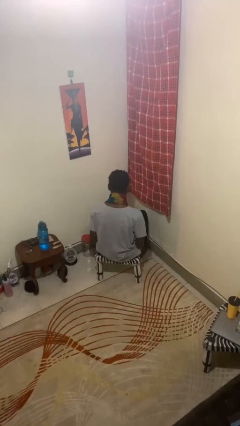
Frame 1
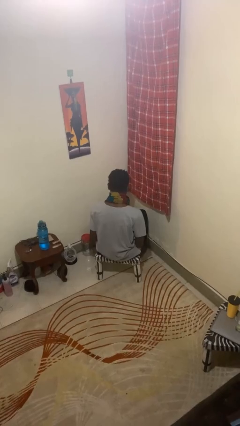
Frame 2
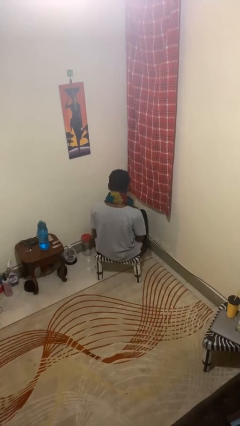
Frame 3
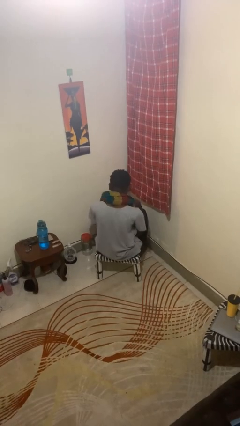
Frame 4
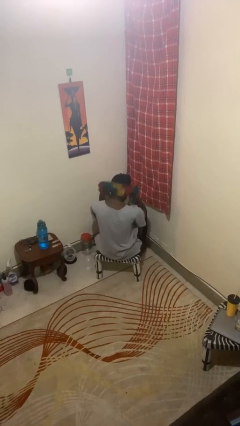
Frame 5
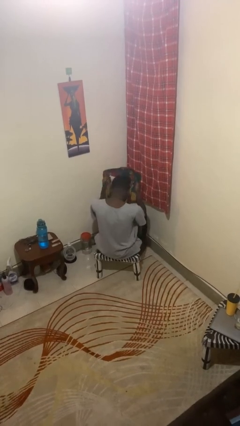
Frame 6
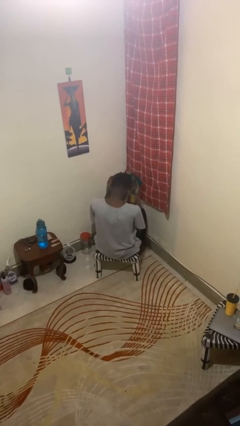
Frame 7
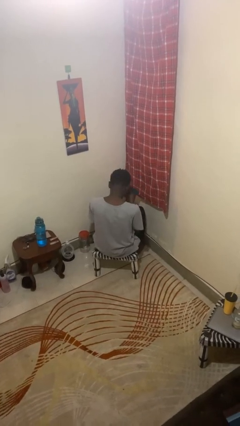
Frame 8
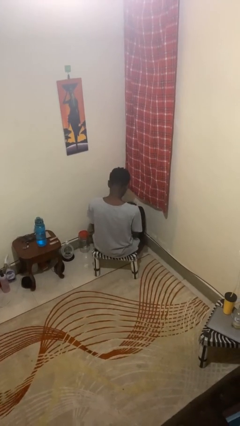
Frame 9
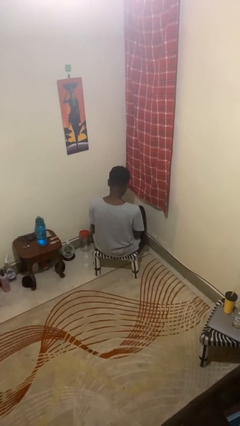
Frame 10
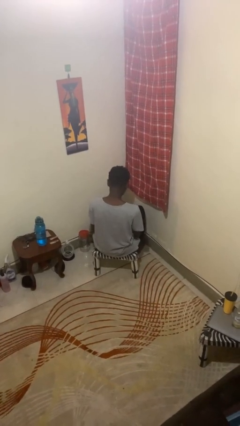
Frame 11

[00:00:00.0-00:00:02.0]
person takes off scarf

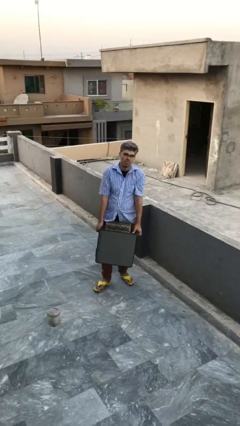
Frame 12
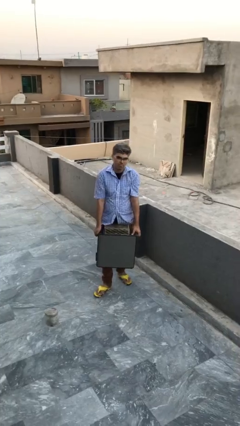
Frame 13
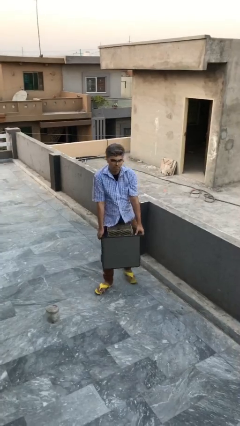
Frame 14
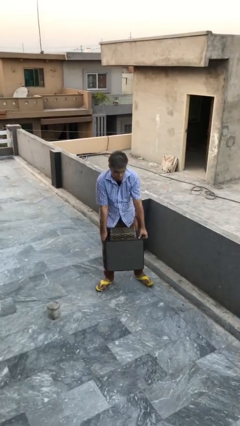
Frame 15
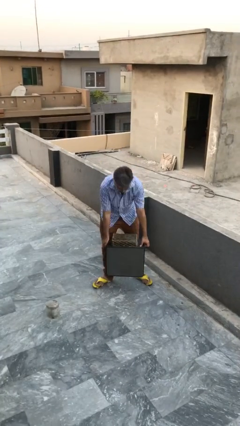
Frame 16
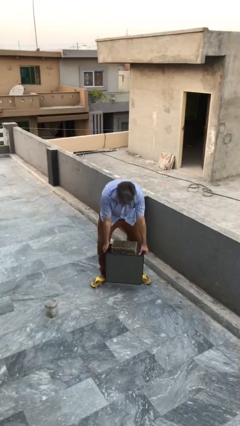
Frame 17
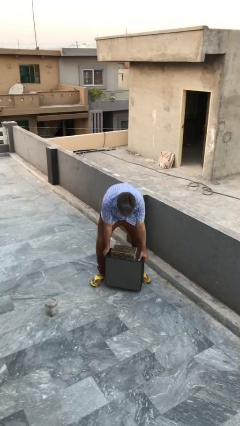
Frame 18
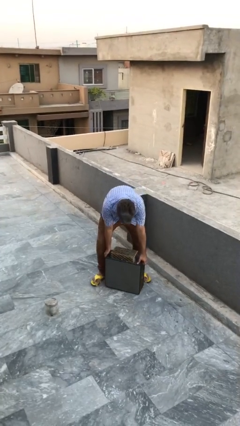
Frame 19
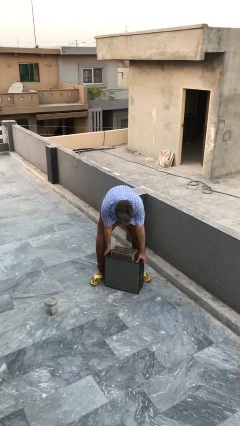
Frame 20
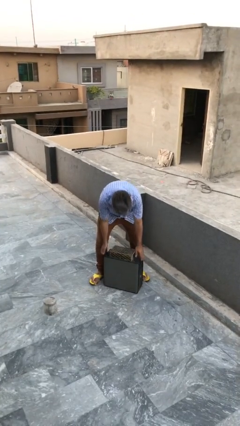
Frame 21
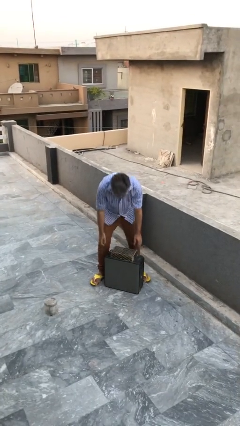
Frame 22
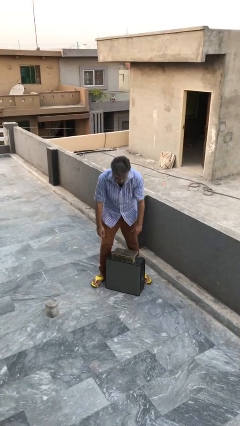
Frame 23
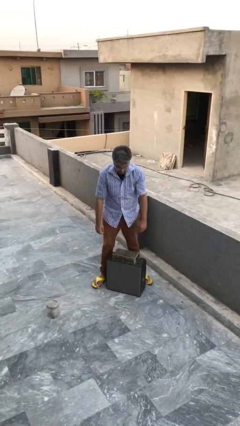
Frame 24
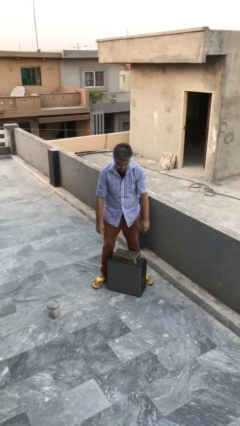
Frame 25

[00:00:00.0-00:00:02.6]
person puts down object on floor

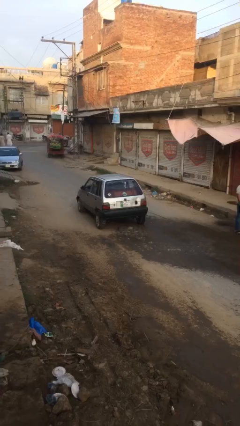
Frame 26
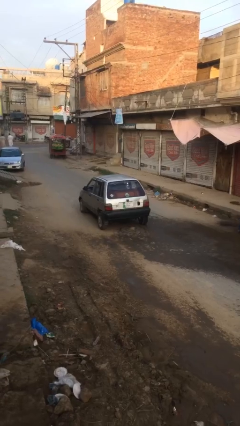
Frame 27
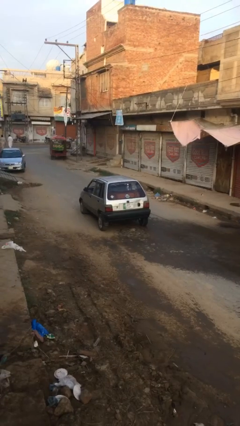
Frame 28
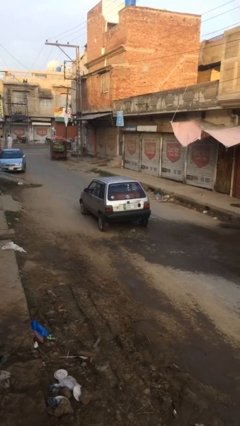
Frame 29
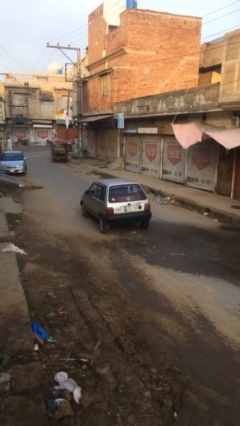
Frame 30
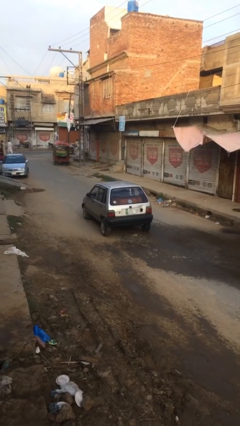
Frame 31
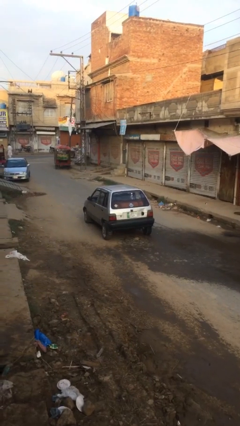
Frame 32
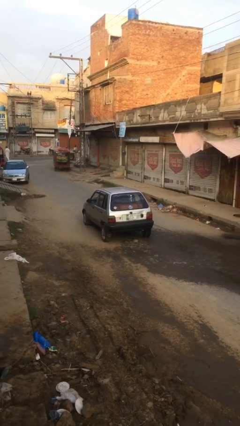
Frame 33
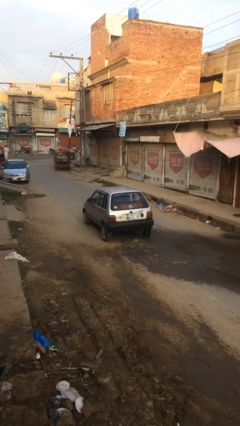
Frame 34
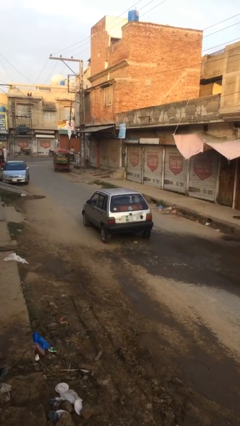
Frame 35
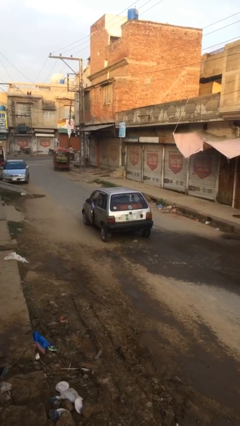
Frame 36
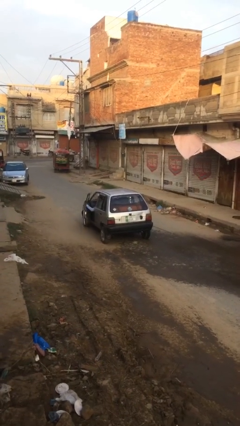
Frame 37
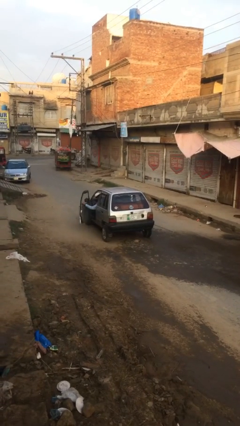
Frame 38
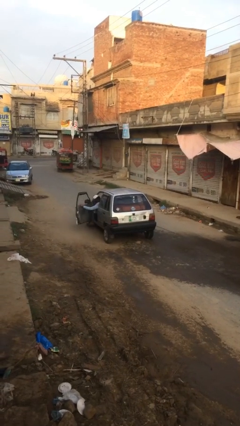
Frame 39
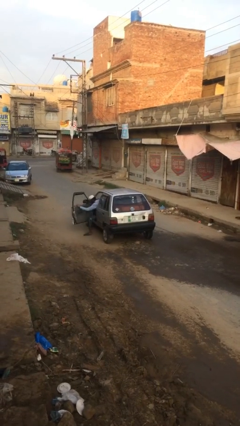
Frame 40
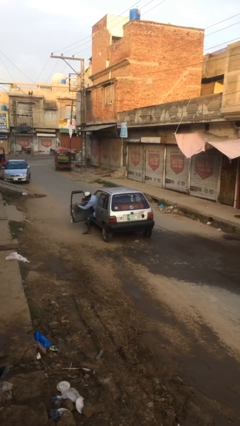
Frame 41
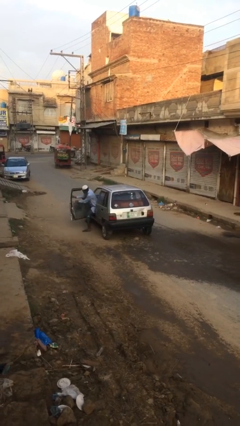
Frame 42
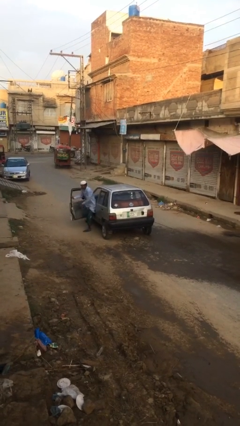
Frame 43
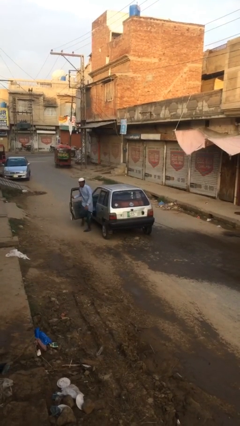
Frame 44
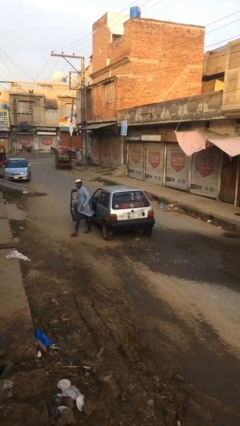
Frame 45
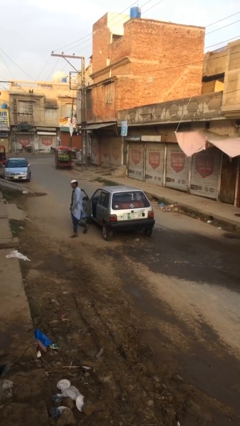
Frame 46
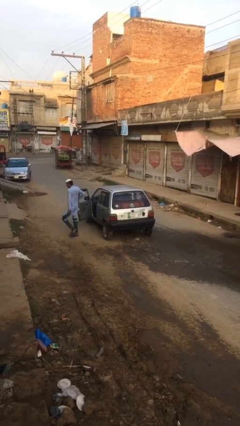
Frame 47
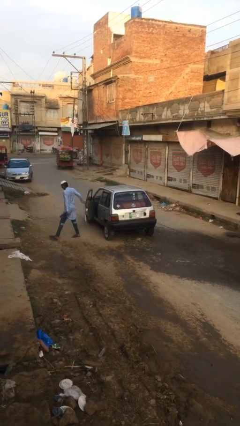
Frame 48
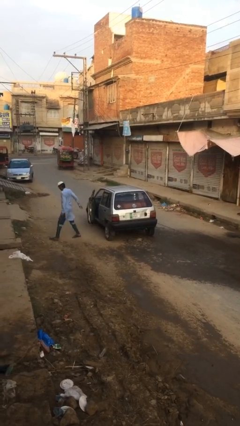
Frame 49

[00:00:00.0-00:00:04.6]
car drops off person

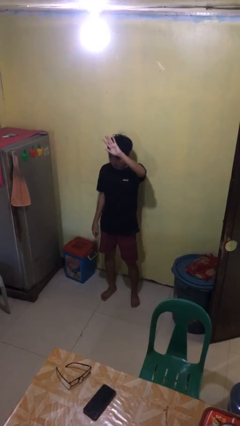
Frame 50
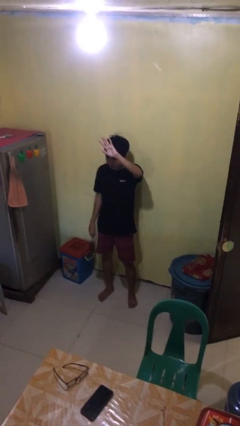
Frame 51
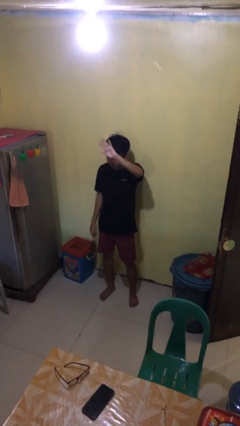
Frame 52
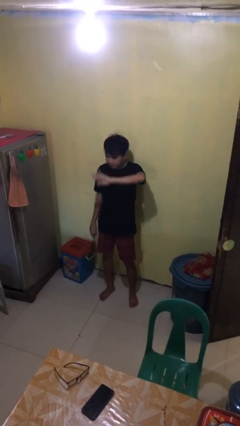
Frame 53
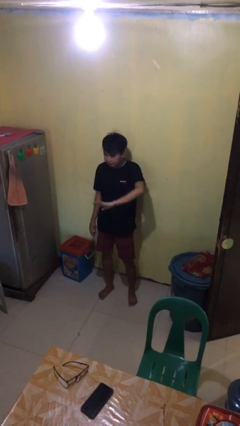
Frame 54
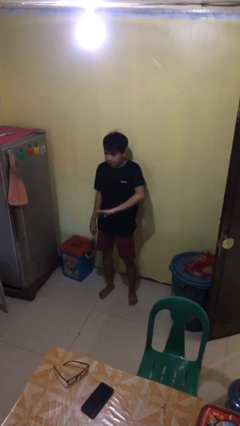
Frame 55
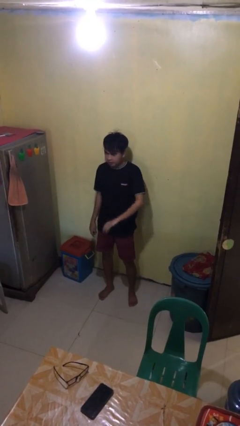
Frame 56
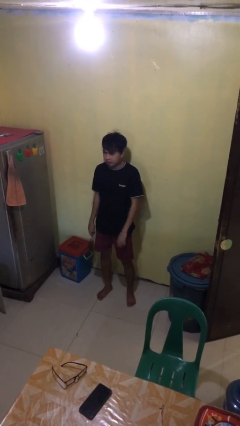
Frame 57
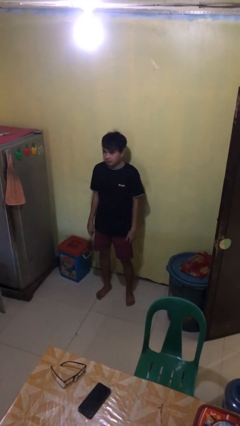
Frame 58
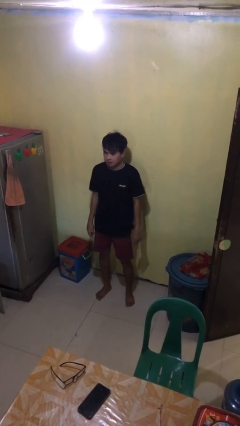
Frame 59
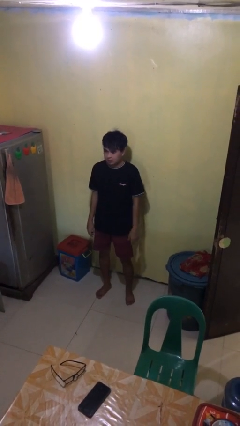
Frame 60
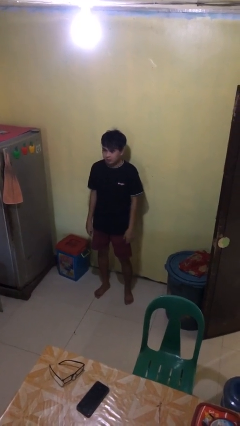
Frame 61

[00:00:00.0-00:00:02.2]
person gestures swipe down

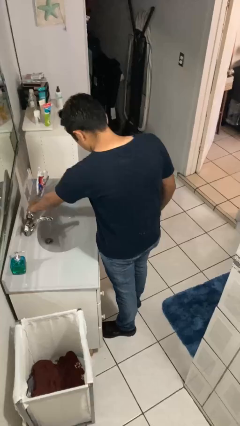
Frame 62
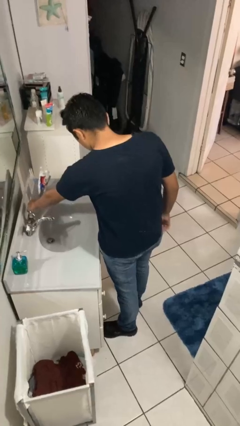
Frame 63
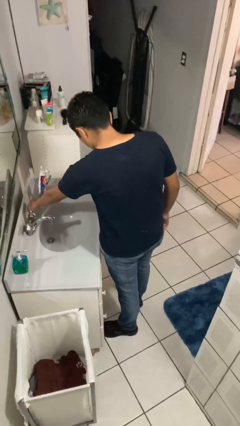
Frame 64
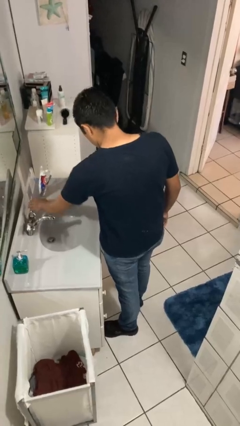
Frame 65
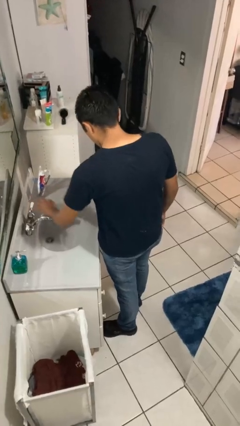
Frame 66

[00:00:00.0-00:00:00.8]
person turns off faucet

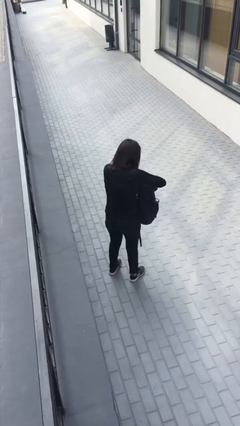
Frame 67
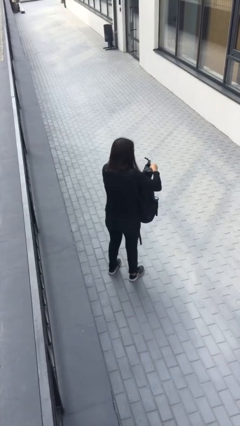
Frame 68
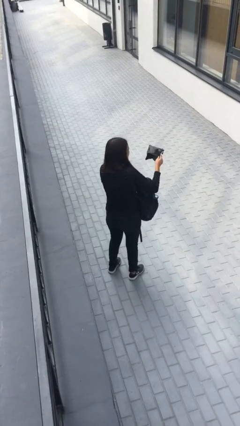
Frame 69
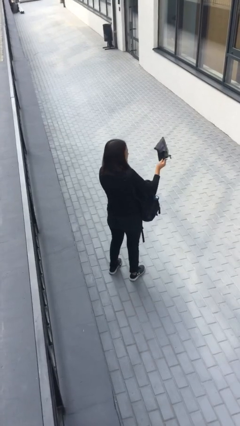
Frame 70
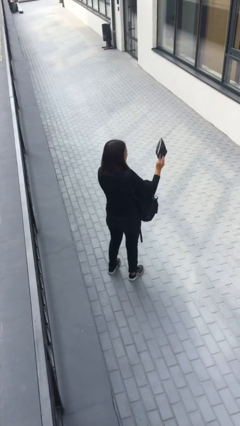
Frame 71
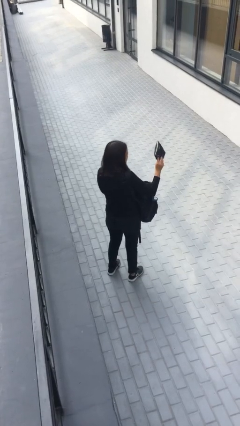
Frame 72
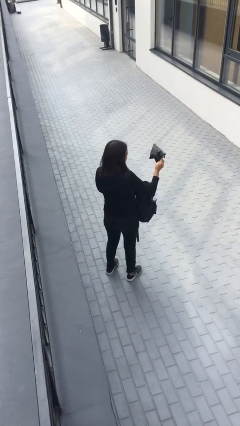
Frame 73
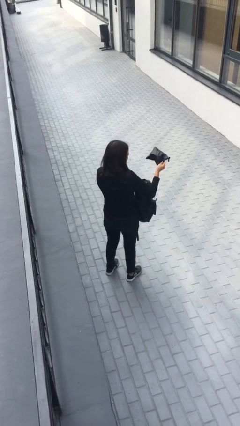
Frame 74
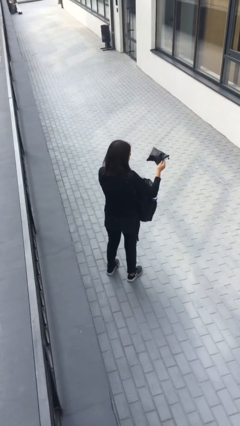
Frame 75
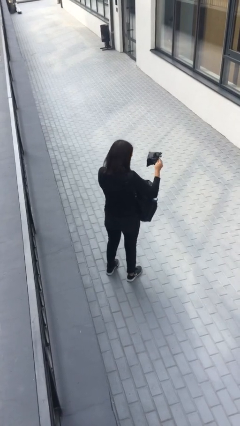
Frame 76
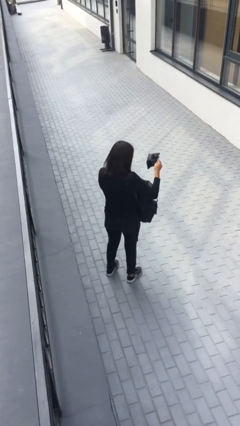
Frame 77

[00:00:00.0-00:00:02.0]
person takes object from backpack

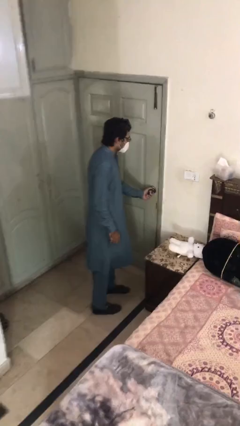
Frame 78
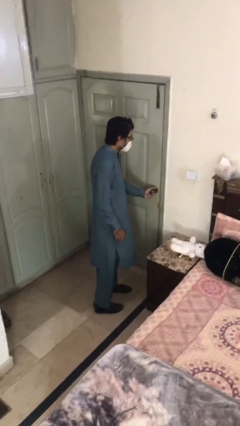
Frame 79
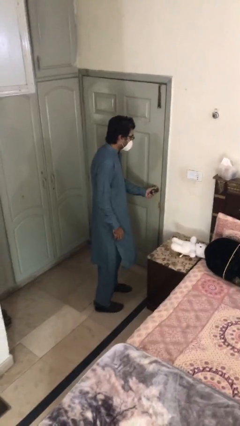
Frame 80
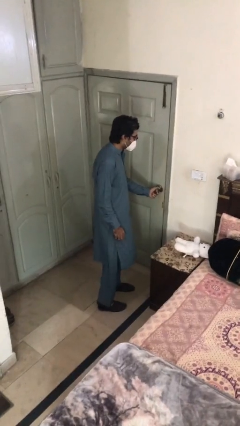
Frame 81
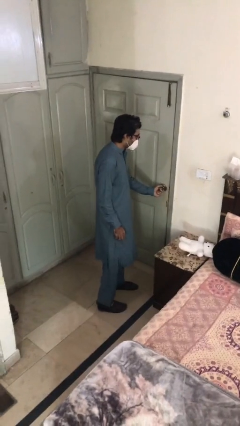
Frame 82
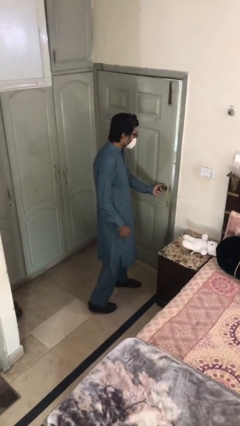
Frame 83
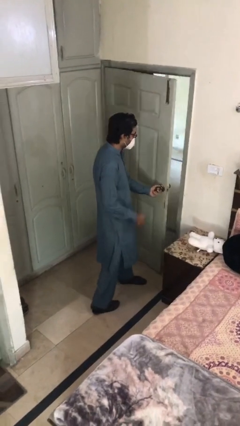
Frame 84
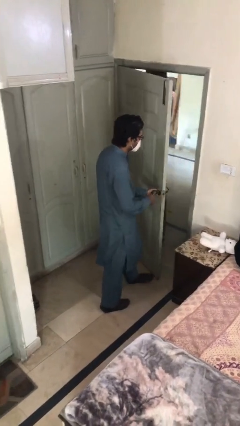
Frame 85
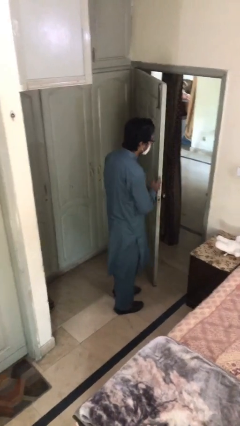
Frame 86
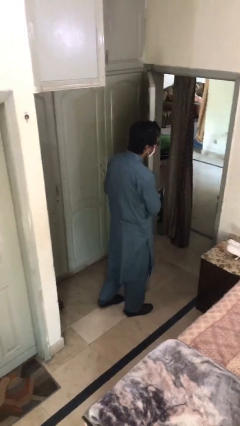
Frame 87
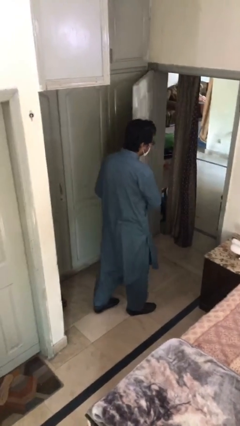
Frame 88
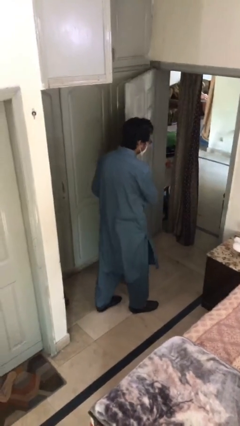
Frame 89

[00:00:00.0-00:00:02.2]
person opens facility door

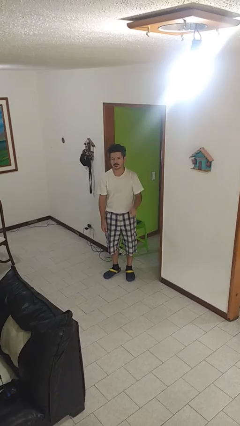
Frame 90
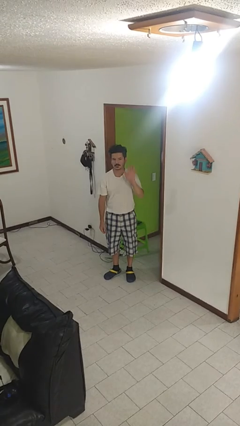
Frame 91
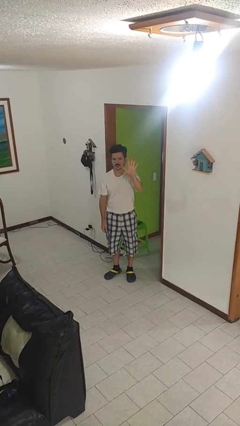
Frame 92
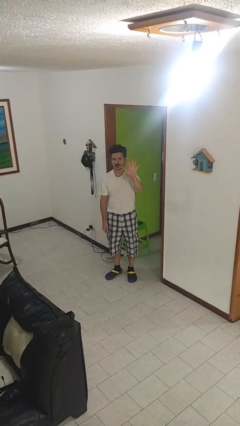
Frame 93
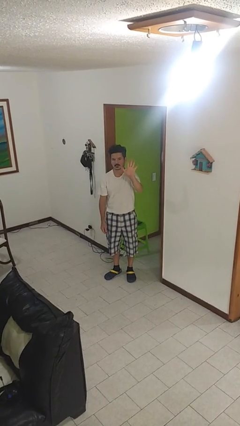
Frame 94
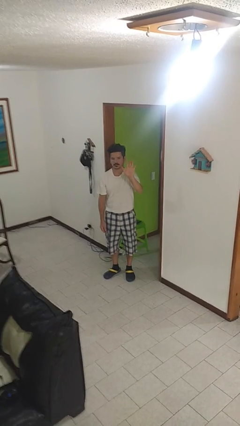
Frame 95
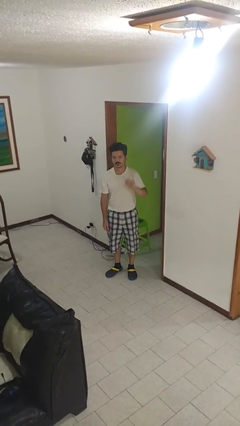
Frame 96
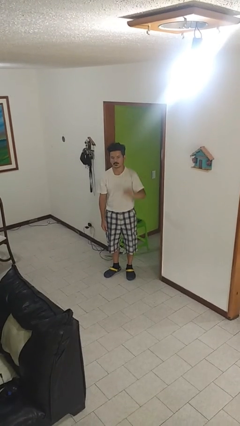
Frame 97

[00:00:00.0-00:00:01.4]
person gestures number five
